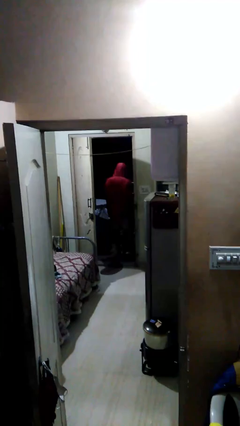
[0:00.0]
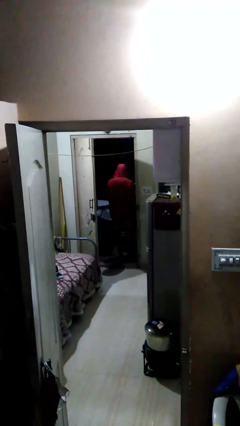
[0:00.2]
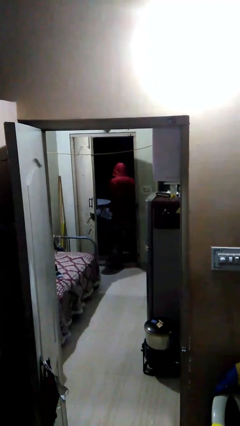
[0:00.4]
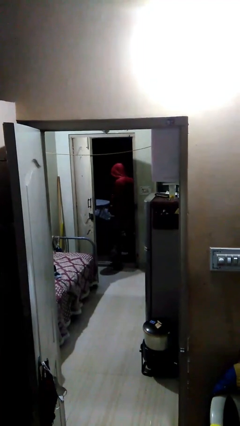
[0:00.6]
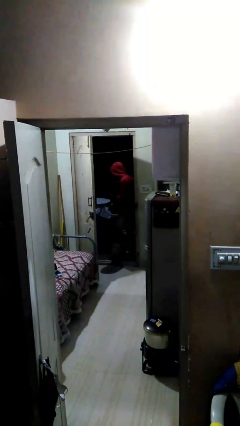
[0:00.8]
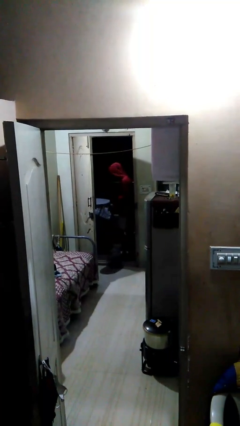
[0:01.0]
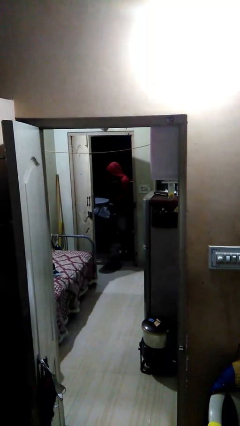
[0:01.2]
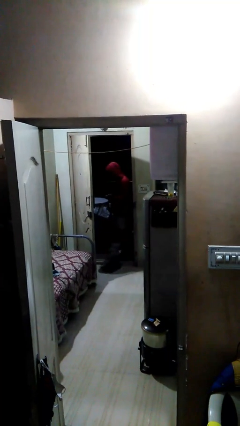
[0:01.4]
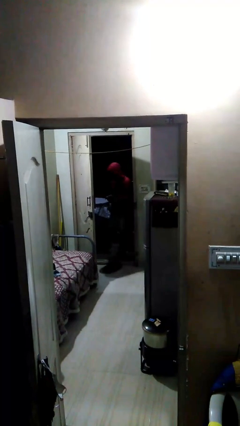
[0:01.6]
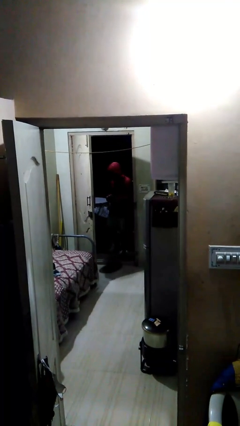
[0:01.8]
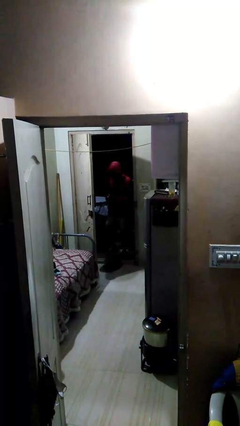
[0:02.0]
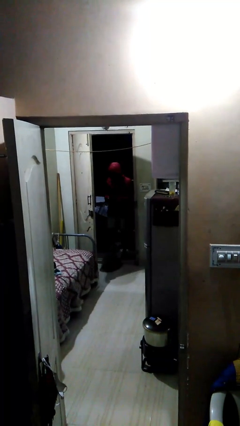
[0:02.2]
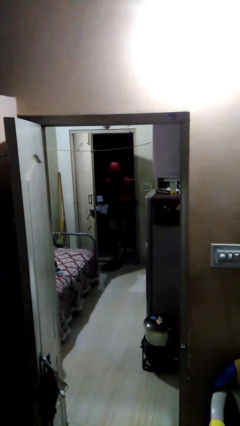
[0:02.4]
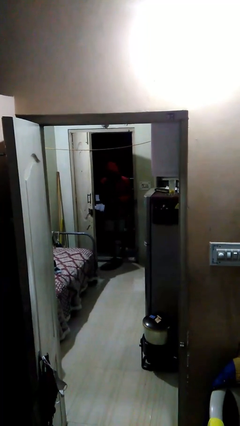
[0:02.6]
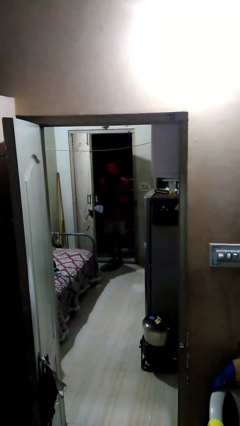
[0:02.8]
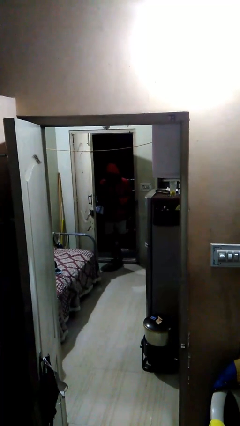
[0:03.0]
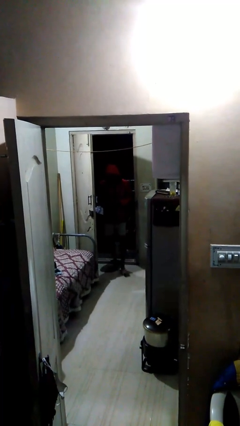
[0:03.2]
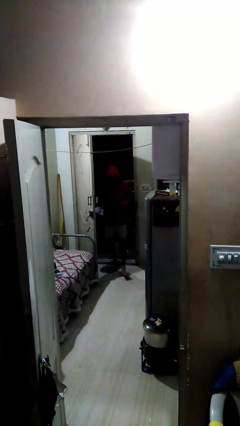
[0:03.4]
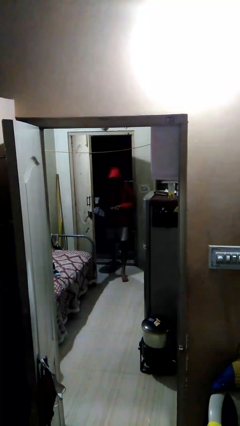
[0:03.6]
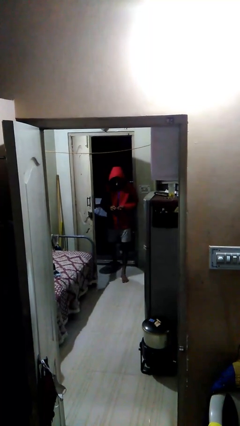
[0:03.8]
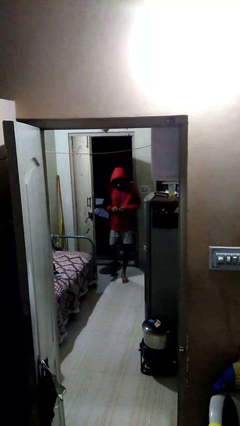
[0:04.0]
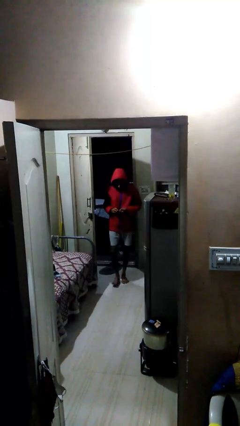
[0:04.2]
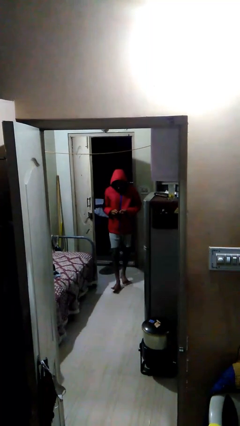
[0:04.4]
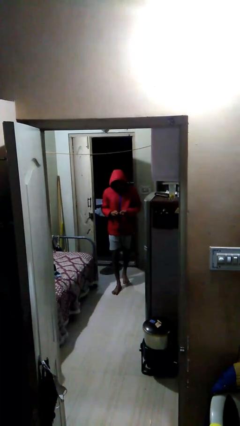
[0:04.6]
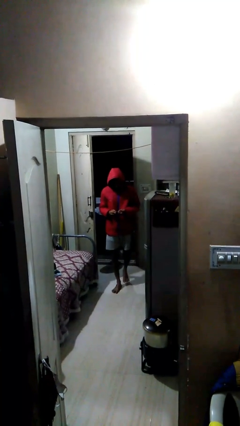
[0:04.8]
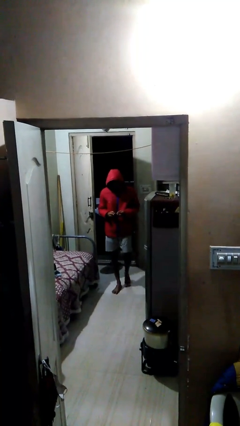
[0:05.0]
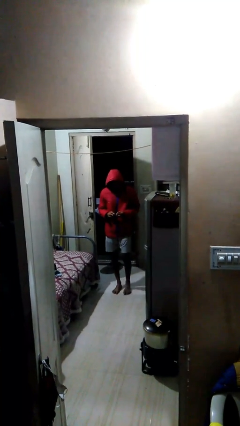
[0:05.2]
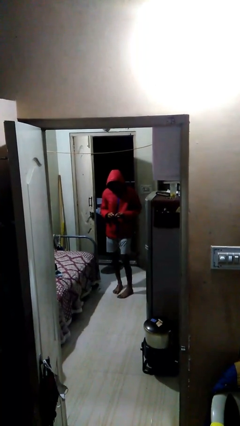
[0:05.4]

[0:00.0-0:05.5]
person enters scene through structure

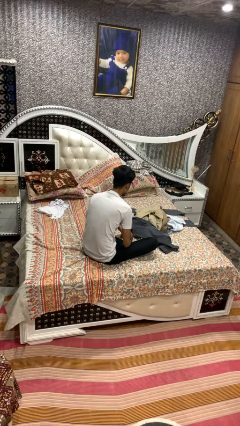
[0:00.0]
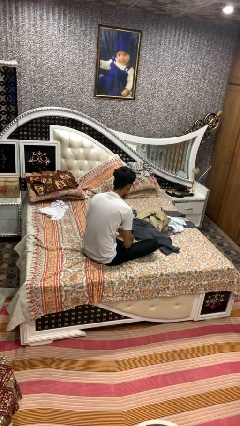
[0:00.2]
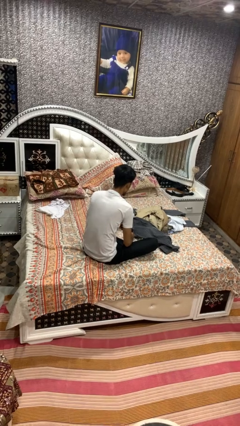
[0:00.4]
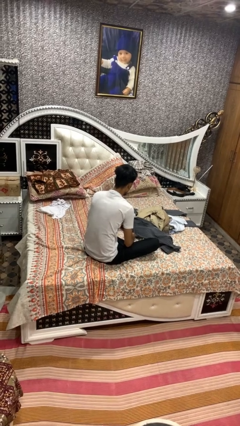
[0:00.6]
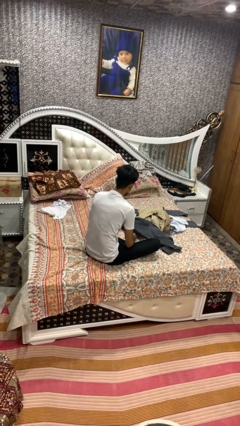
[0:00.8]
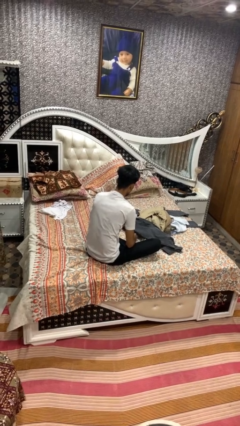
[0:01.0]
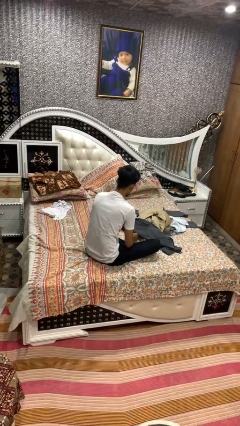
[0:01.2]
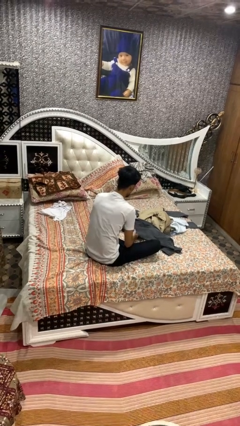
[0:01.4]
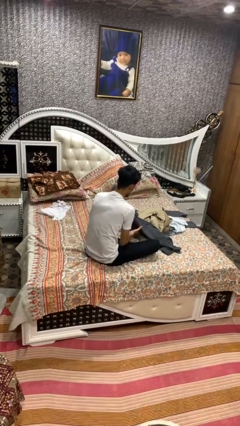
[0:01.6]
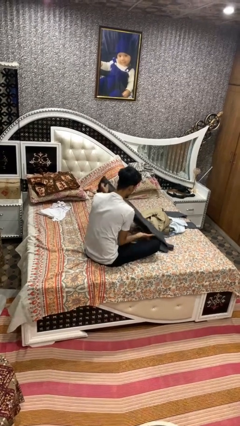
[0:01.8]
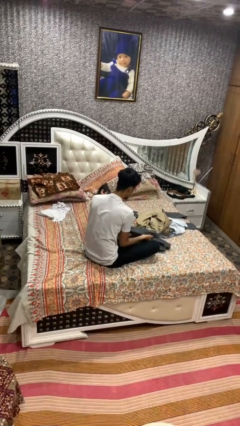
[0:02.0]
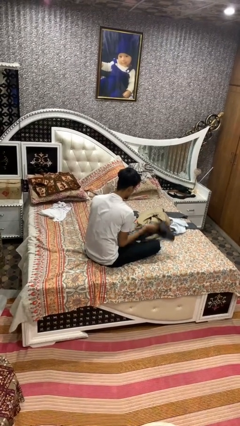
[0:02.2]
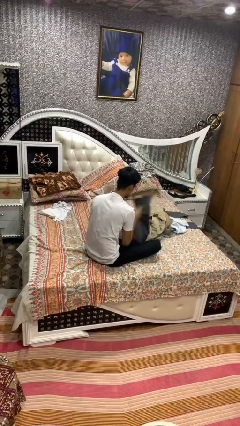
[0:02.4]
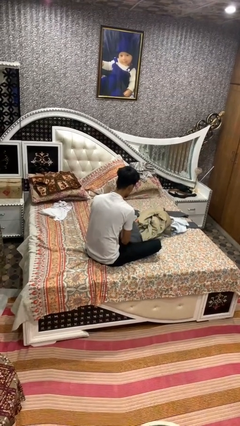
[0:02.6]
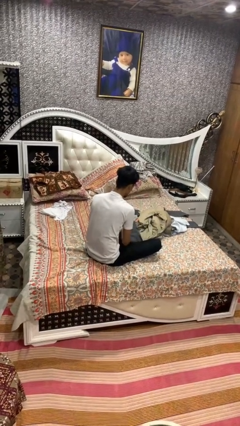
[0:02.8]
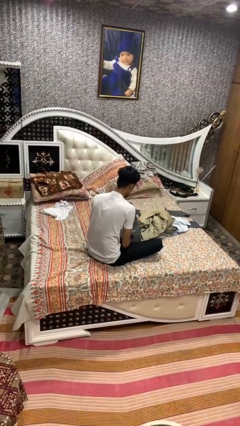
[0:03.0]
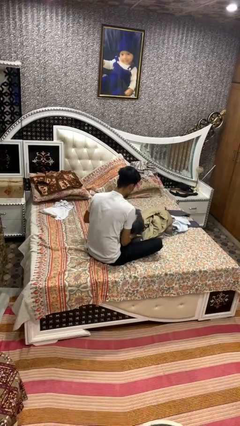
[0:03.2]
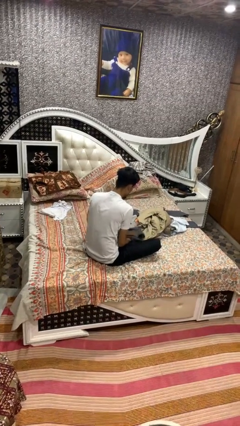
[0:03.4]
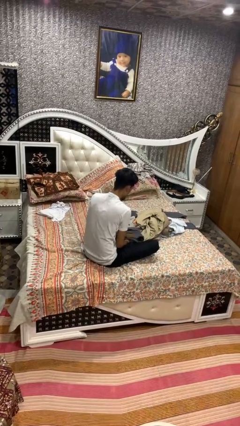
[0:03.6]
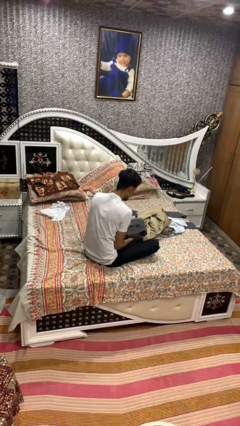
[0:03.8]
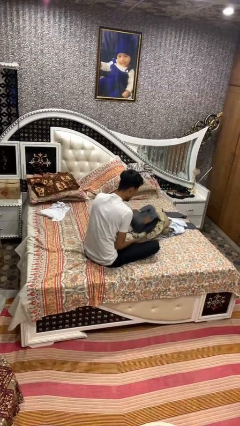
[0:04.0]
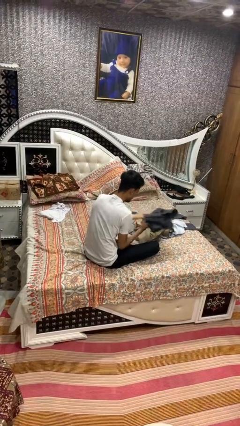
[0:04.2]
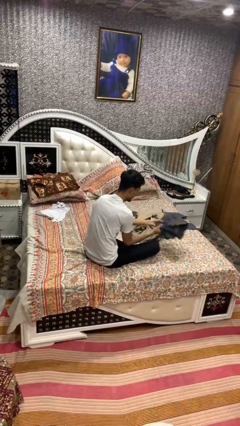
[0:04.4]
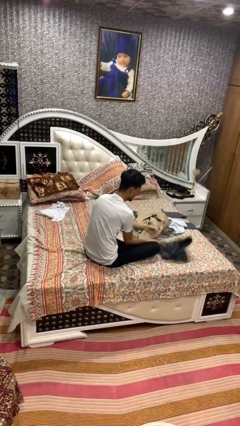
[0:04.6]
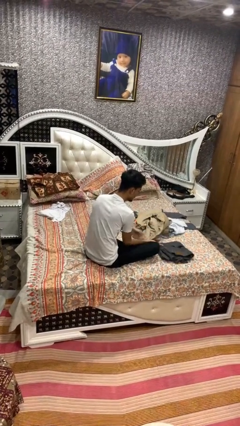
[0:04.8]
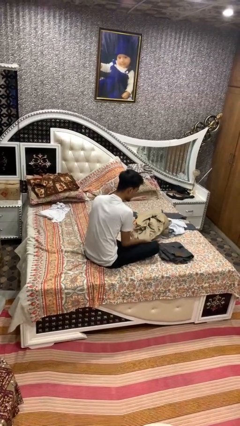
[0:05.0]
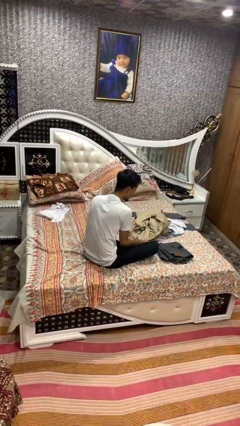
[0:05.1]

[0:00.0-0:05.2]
person folds pants

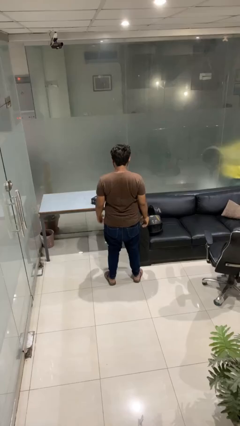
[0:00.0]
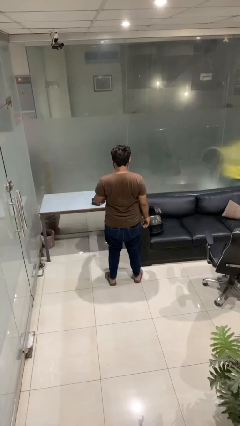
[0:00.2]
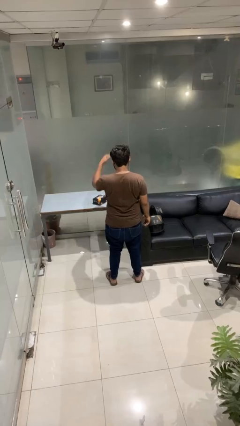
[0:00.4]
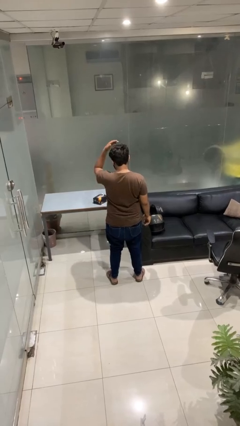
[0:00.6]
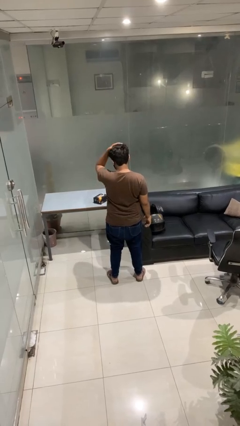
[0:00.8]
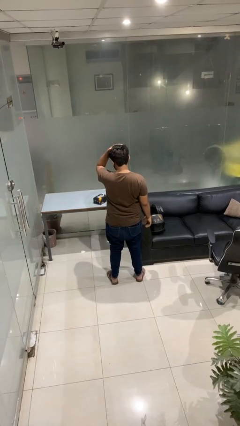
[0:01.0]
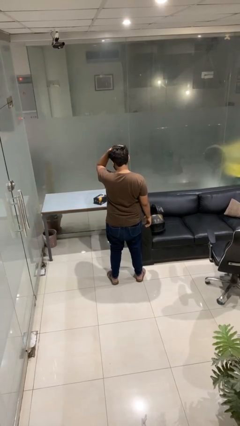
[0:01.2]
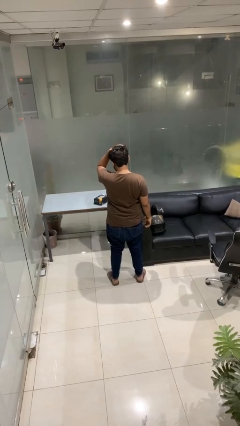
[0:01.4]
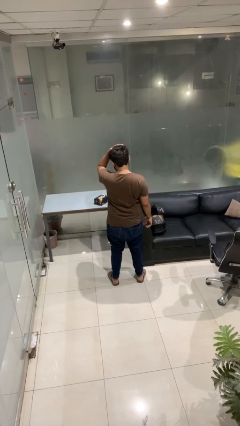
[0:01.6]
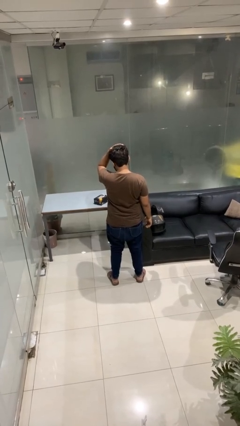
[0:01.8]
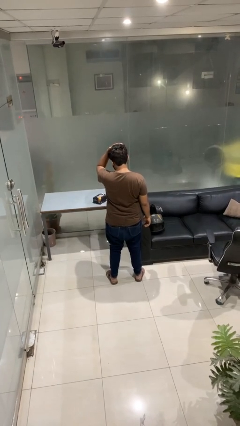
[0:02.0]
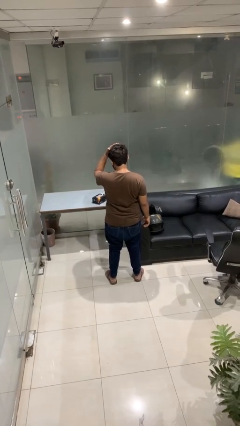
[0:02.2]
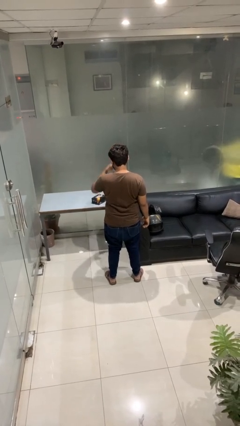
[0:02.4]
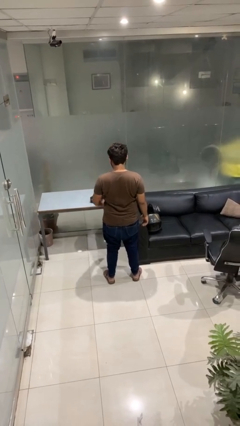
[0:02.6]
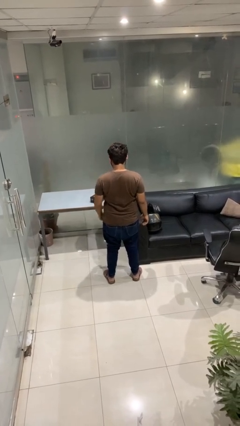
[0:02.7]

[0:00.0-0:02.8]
person pats head

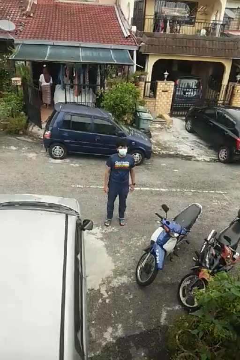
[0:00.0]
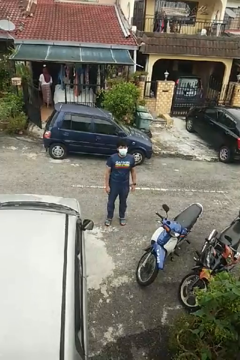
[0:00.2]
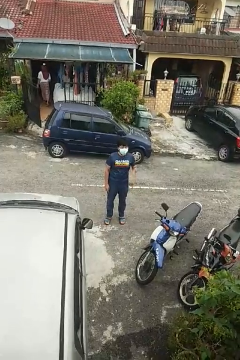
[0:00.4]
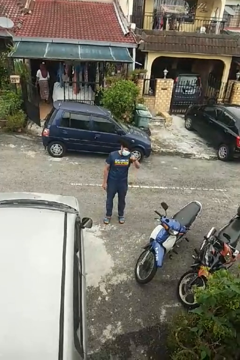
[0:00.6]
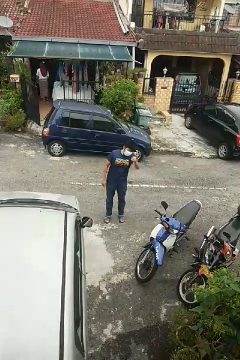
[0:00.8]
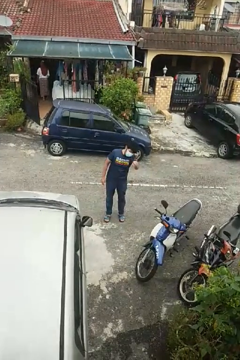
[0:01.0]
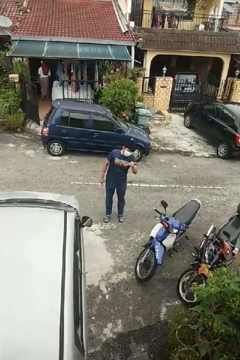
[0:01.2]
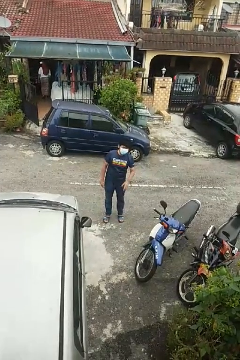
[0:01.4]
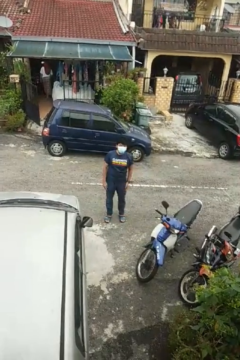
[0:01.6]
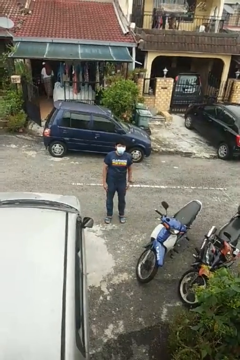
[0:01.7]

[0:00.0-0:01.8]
person points at person

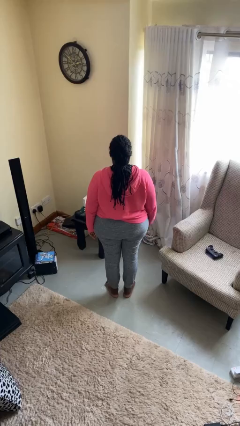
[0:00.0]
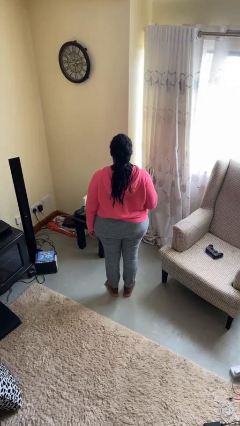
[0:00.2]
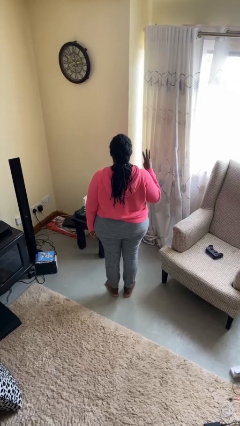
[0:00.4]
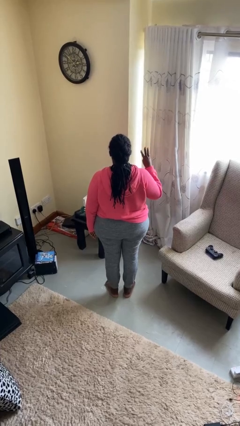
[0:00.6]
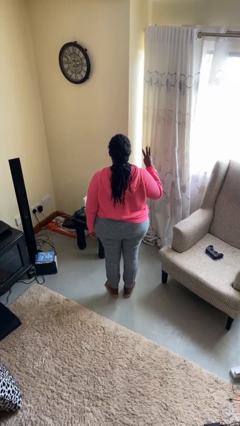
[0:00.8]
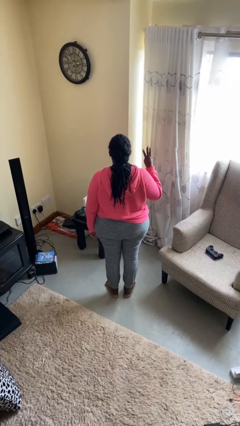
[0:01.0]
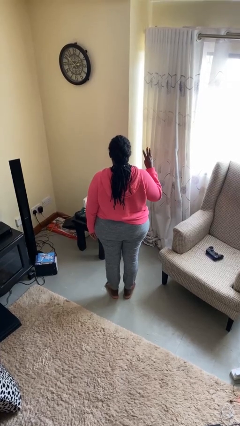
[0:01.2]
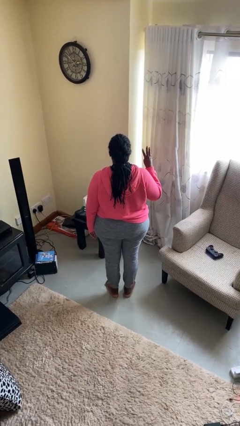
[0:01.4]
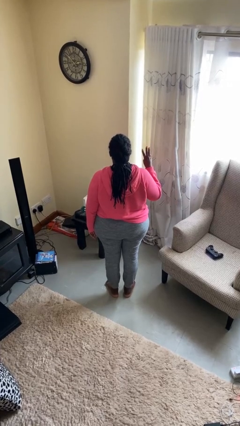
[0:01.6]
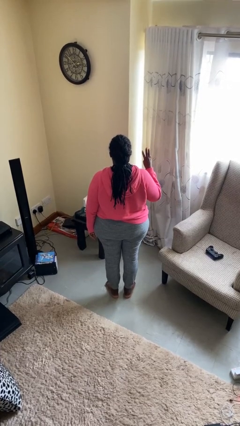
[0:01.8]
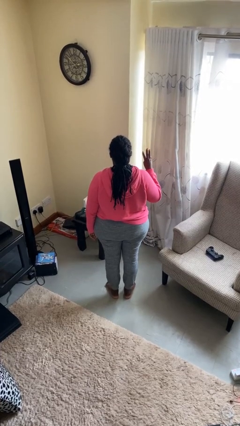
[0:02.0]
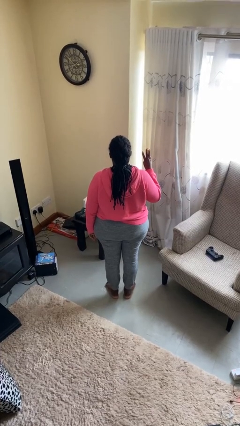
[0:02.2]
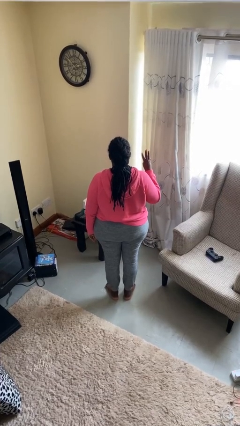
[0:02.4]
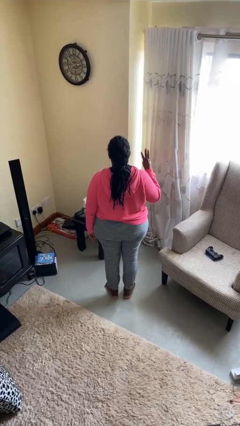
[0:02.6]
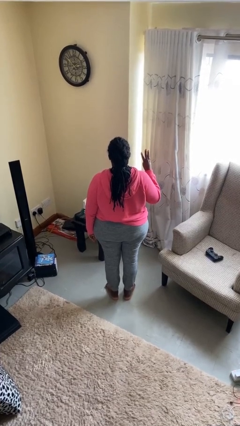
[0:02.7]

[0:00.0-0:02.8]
person gestures number three
